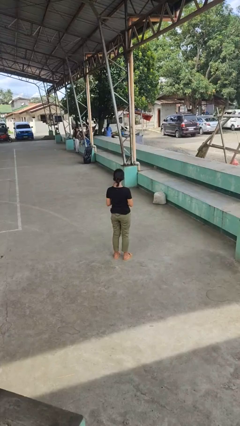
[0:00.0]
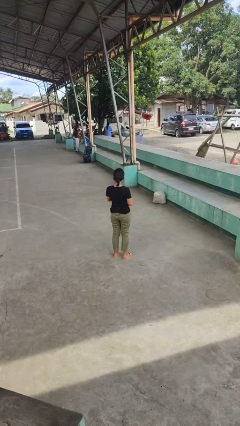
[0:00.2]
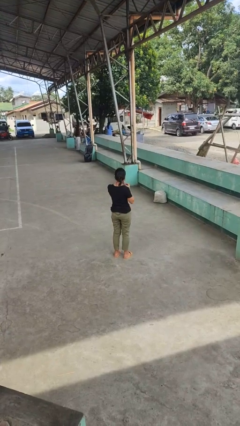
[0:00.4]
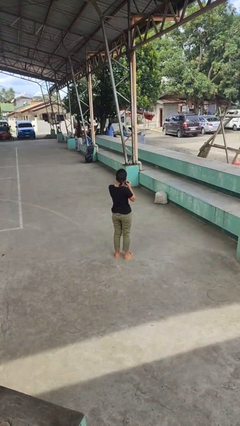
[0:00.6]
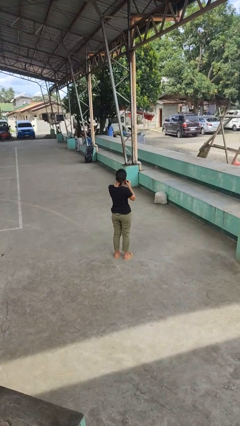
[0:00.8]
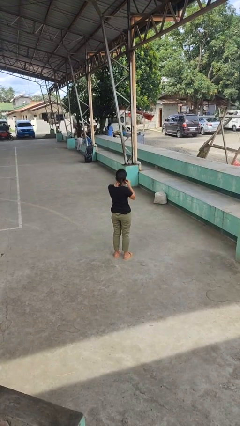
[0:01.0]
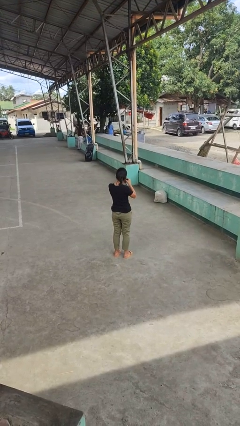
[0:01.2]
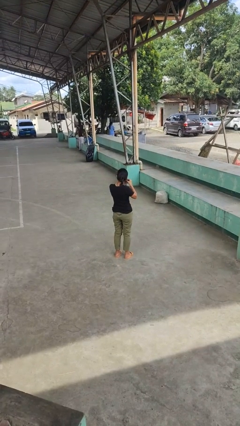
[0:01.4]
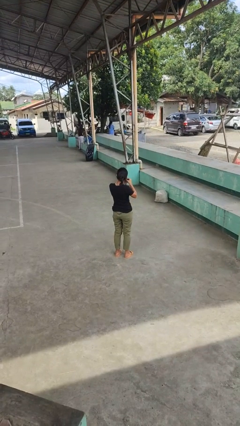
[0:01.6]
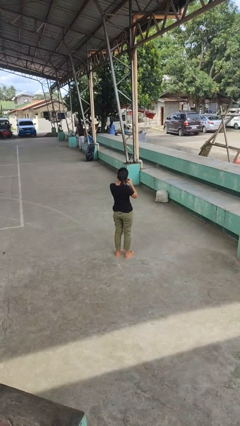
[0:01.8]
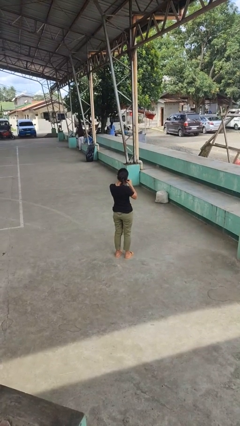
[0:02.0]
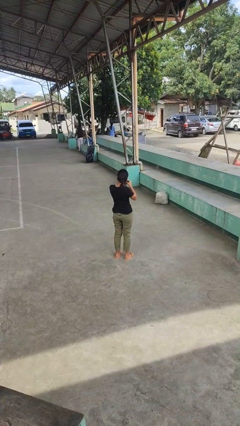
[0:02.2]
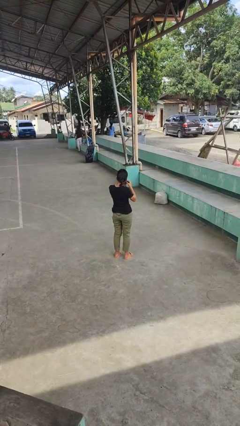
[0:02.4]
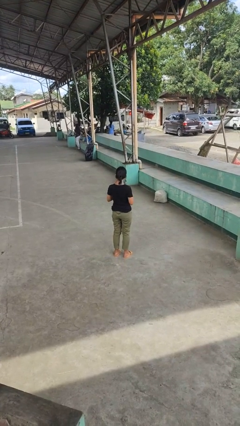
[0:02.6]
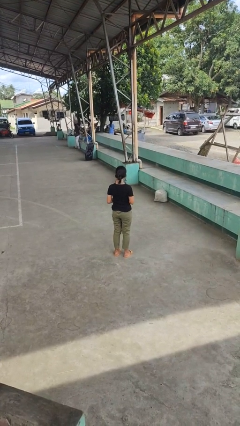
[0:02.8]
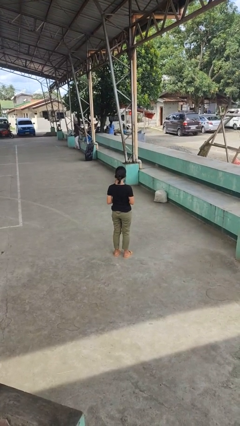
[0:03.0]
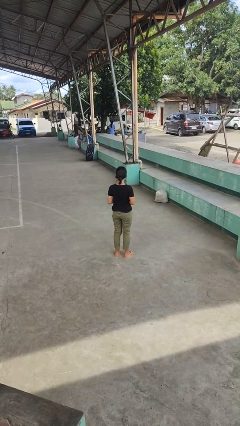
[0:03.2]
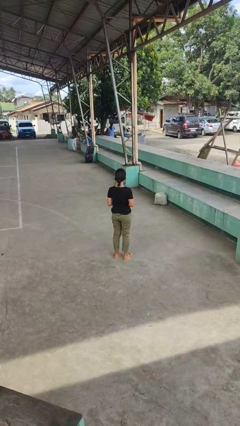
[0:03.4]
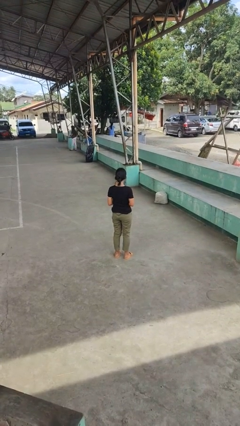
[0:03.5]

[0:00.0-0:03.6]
person puts on earrings

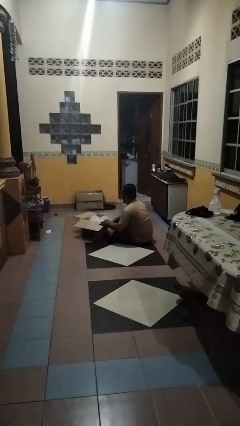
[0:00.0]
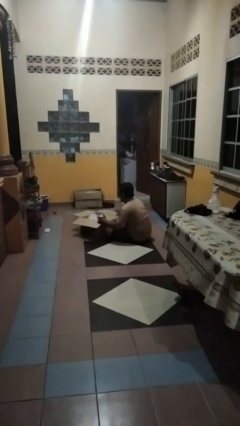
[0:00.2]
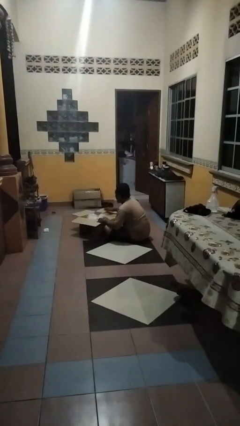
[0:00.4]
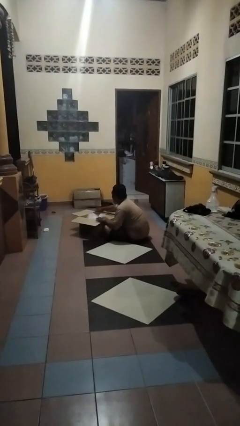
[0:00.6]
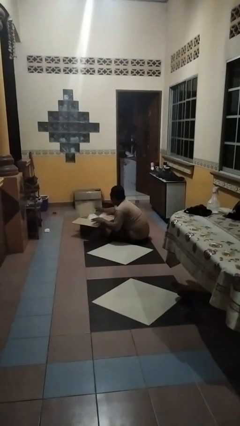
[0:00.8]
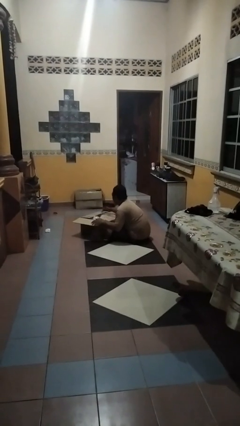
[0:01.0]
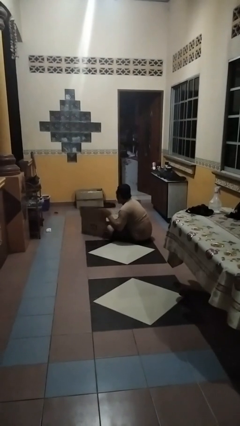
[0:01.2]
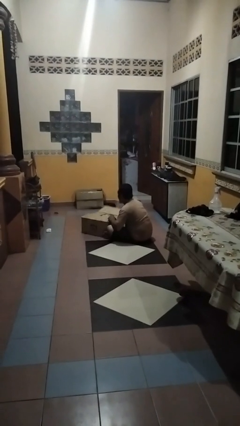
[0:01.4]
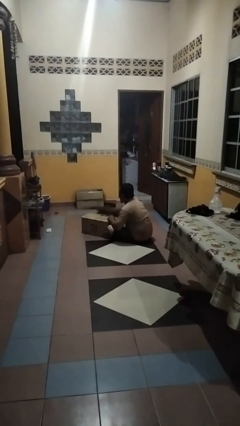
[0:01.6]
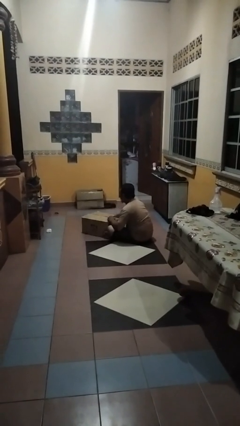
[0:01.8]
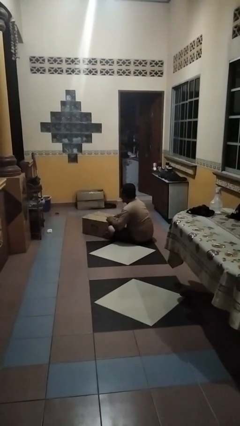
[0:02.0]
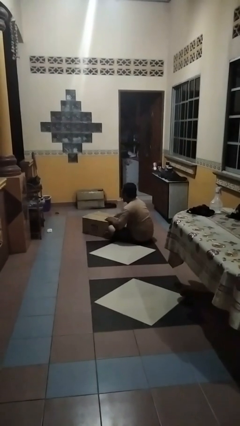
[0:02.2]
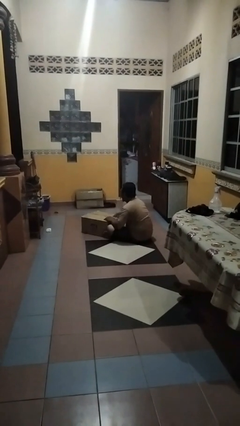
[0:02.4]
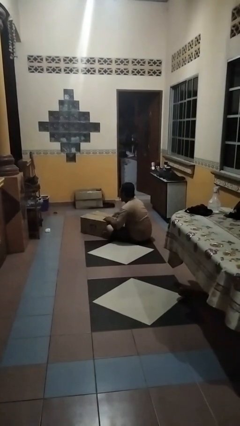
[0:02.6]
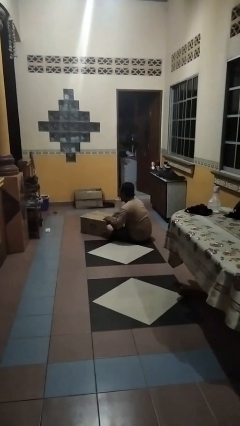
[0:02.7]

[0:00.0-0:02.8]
person closes box

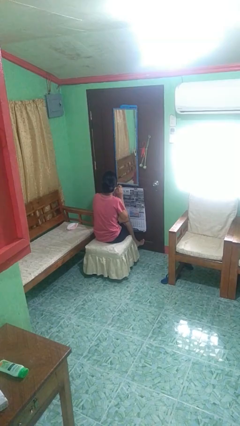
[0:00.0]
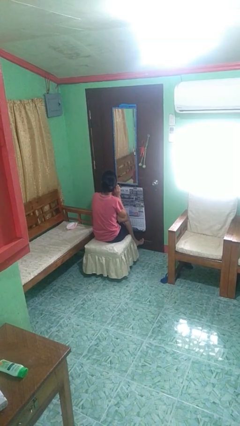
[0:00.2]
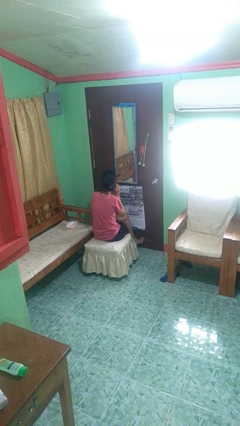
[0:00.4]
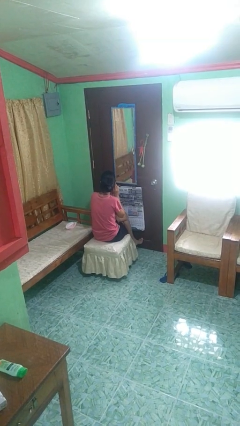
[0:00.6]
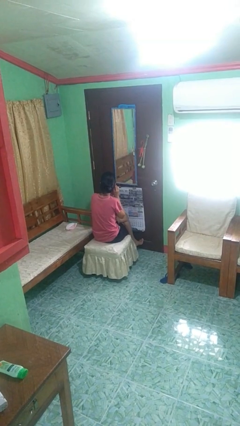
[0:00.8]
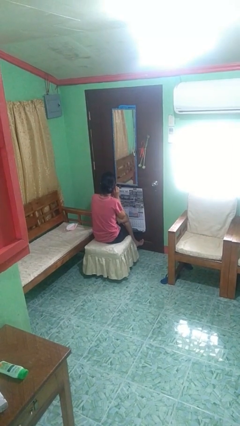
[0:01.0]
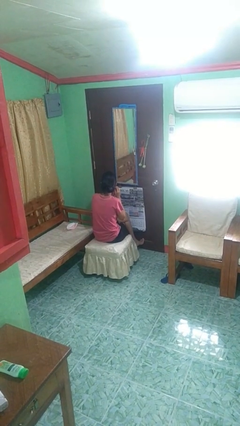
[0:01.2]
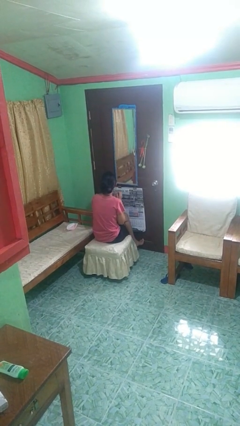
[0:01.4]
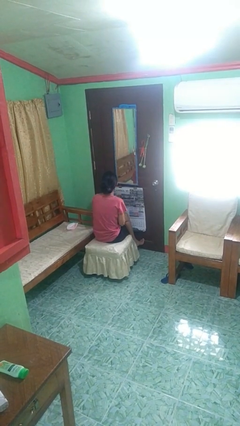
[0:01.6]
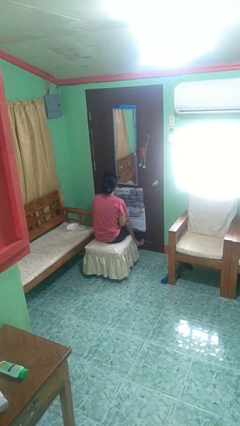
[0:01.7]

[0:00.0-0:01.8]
person takes off earrings

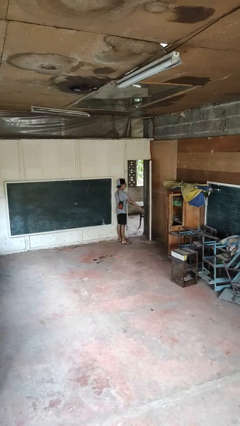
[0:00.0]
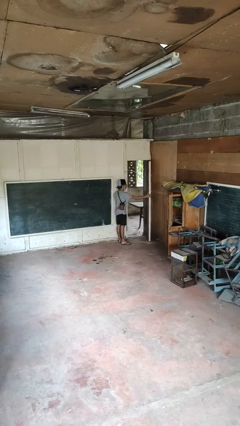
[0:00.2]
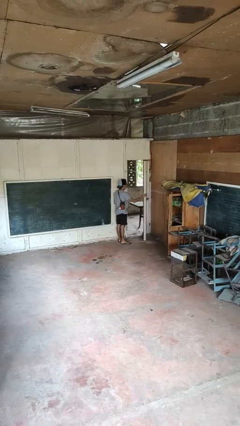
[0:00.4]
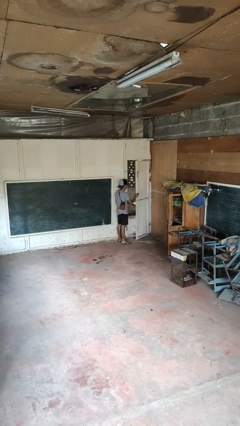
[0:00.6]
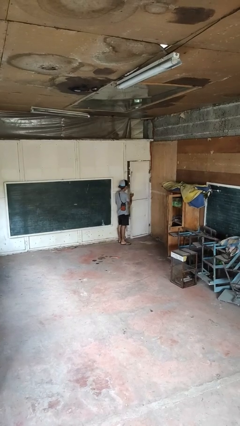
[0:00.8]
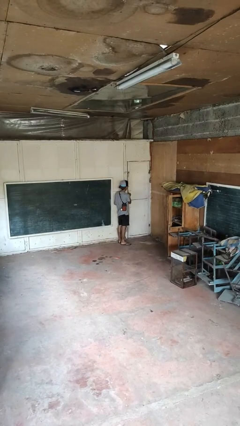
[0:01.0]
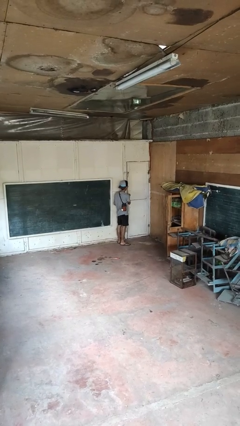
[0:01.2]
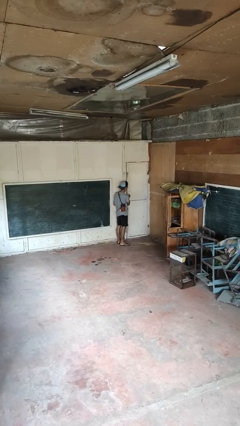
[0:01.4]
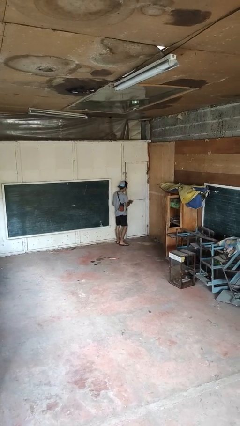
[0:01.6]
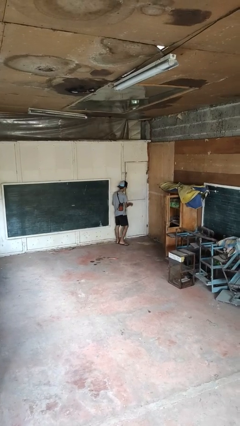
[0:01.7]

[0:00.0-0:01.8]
person closes facility door

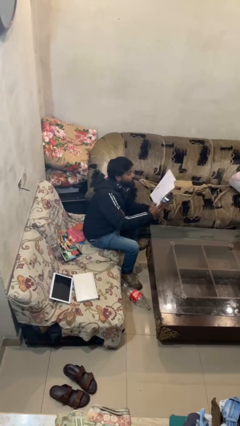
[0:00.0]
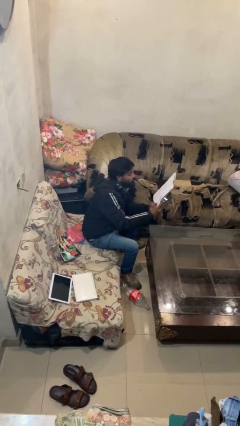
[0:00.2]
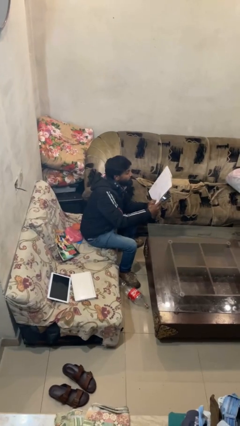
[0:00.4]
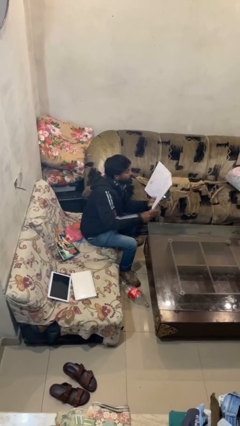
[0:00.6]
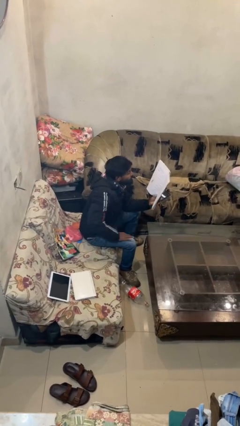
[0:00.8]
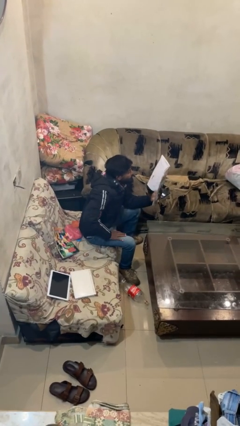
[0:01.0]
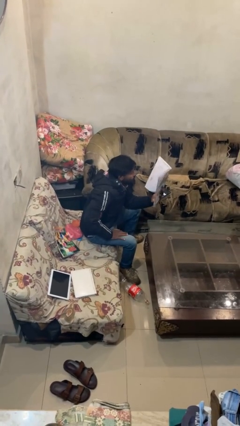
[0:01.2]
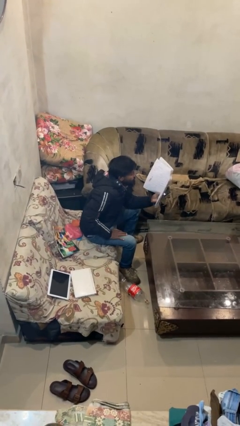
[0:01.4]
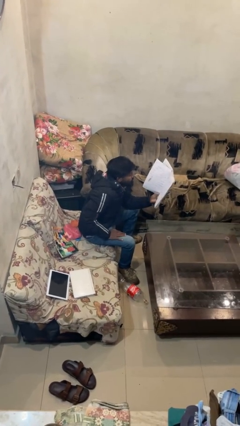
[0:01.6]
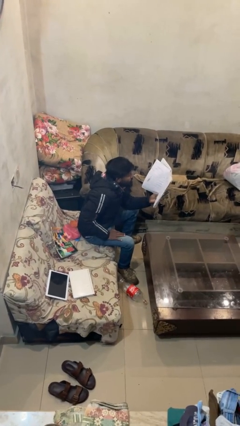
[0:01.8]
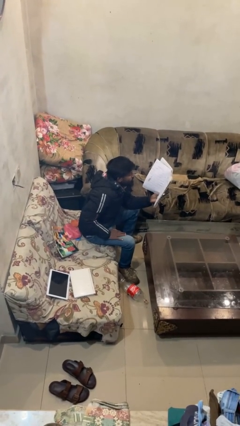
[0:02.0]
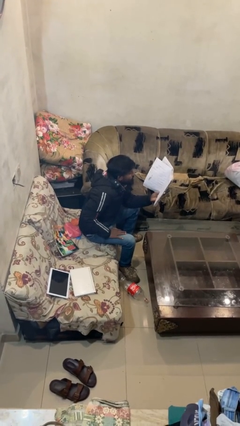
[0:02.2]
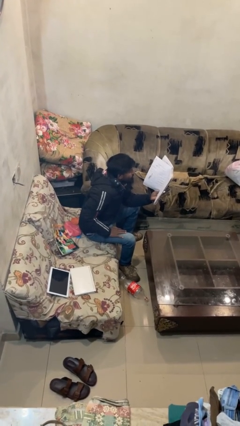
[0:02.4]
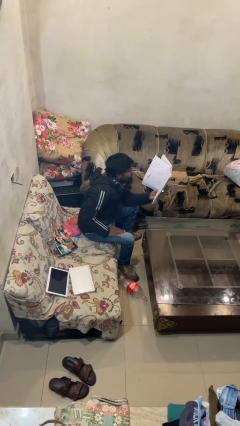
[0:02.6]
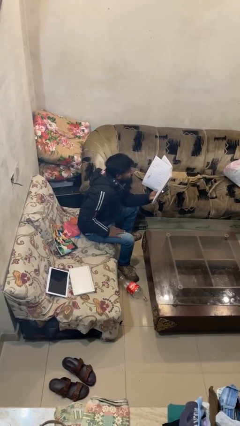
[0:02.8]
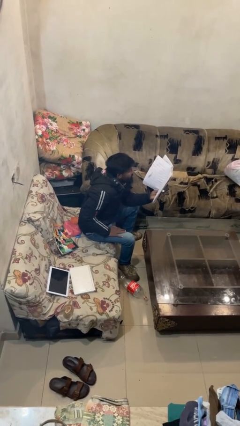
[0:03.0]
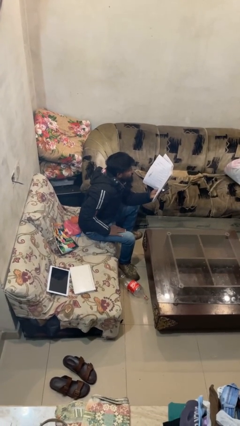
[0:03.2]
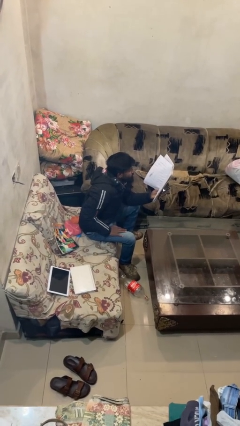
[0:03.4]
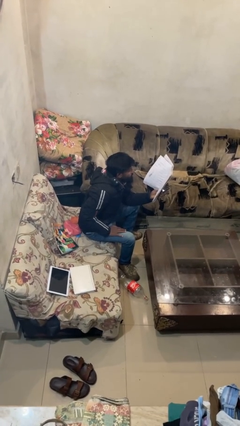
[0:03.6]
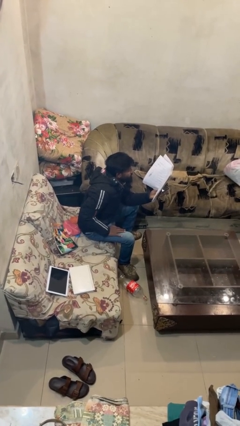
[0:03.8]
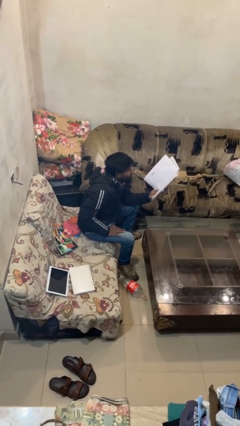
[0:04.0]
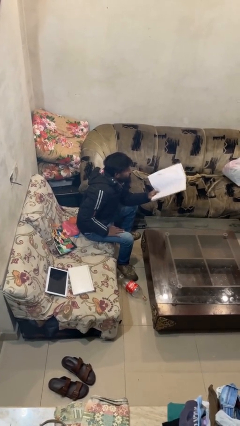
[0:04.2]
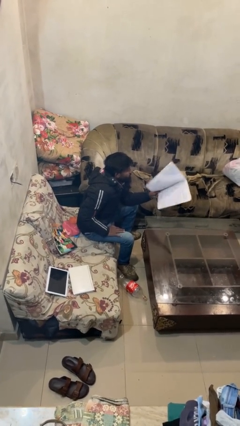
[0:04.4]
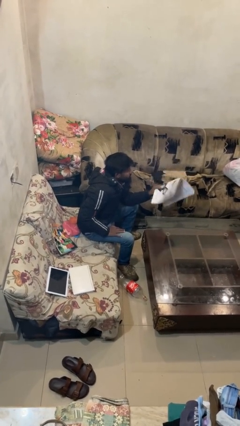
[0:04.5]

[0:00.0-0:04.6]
person reads document

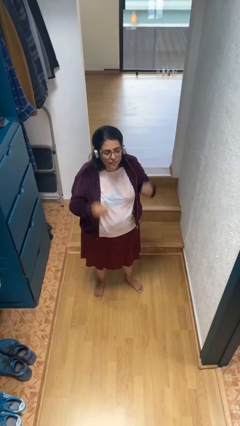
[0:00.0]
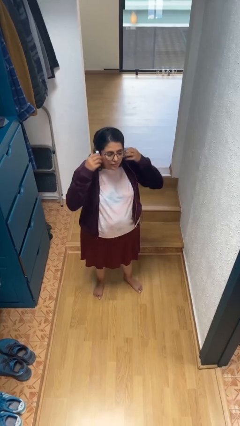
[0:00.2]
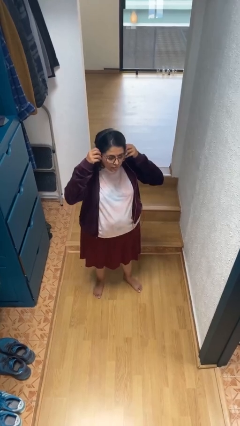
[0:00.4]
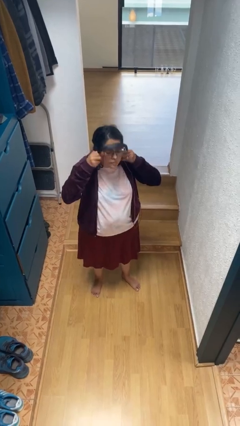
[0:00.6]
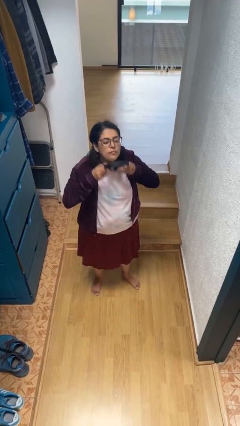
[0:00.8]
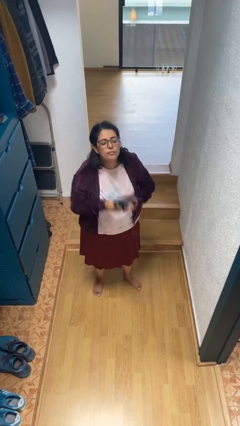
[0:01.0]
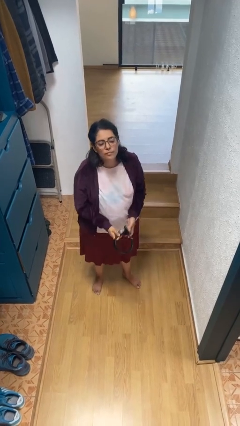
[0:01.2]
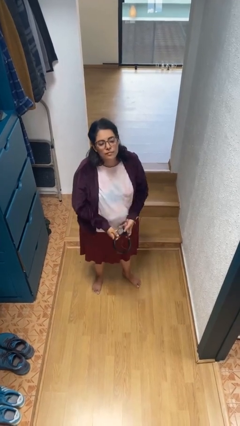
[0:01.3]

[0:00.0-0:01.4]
person takes off headphones

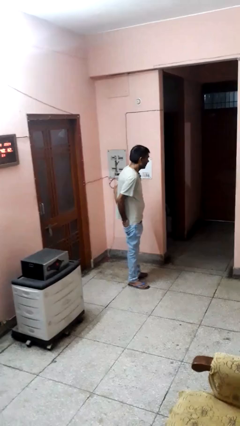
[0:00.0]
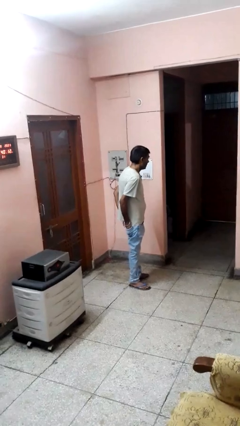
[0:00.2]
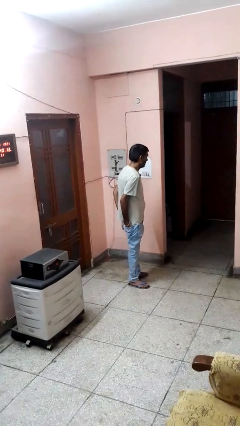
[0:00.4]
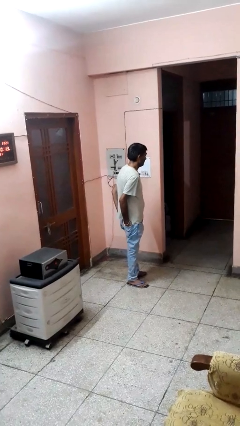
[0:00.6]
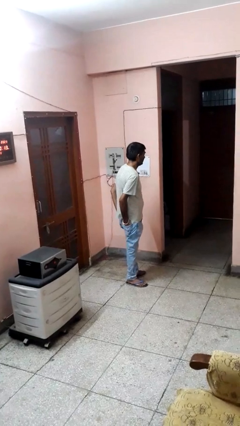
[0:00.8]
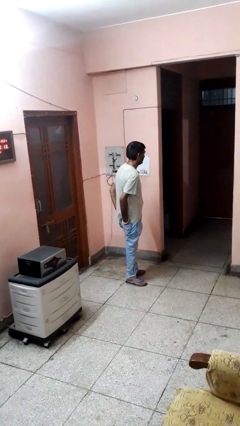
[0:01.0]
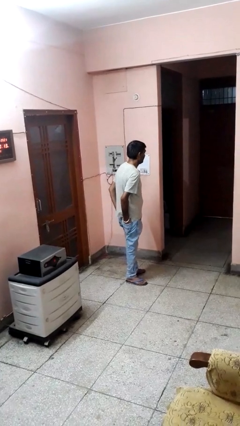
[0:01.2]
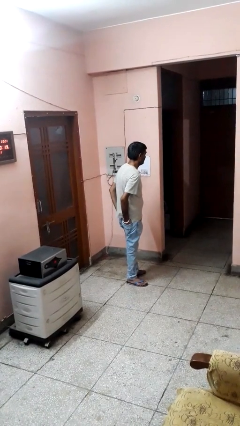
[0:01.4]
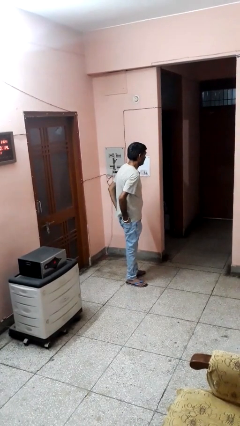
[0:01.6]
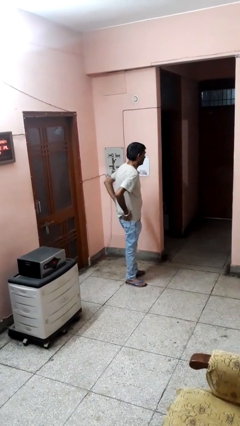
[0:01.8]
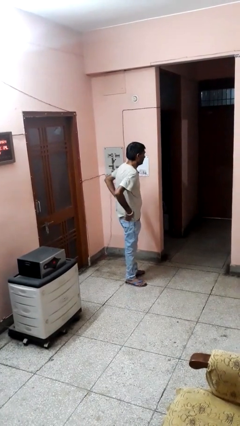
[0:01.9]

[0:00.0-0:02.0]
person puts hands in back pockets
